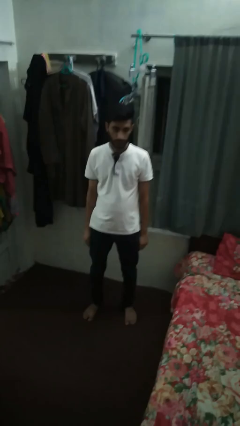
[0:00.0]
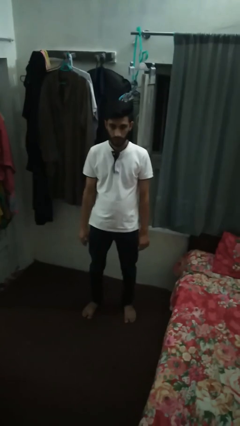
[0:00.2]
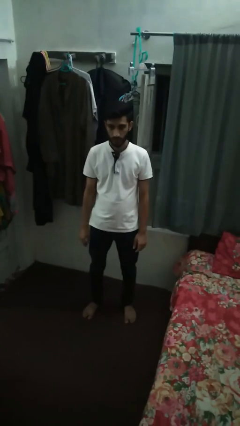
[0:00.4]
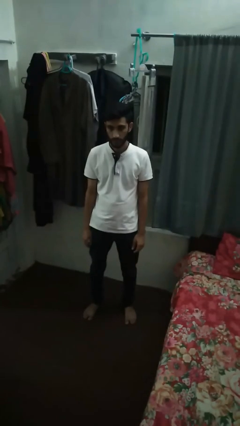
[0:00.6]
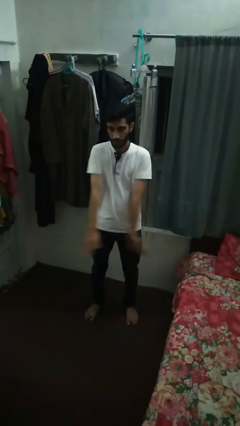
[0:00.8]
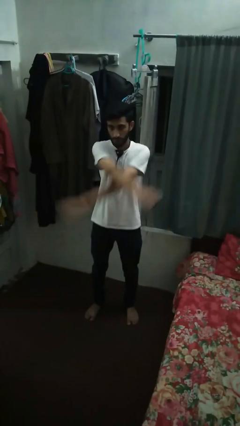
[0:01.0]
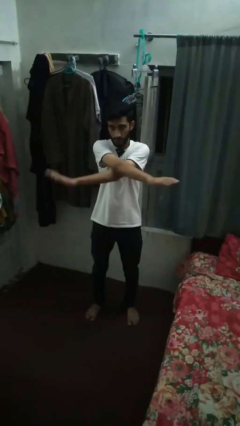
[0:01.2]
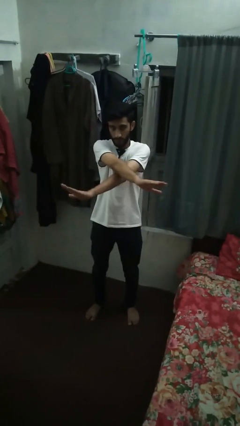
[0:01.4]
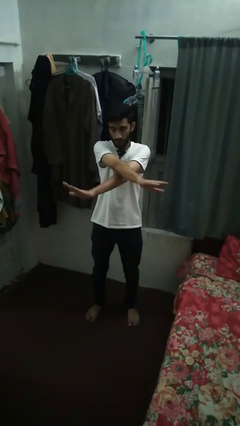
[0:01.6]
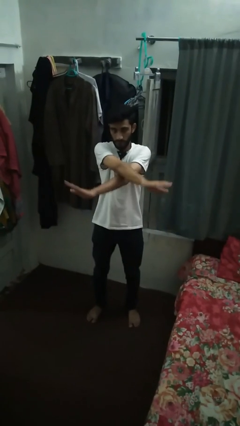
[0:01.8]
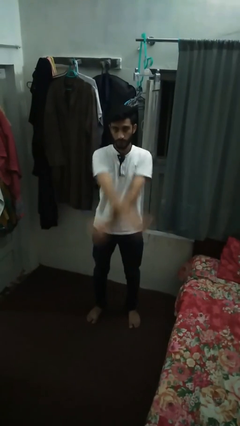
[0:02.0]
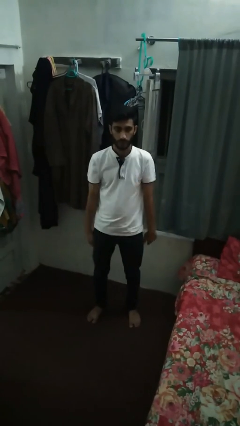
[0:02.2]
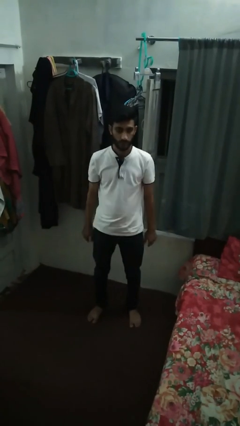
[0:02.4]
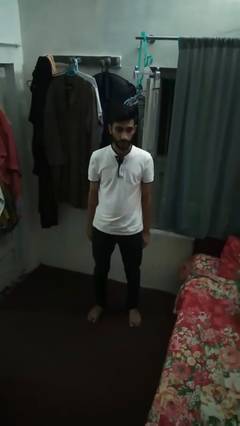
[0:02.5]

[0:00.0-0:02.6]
person gestures arms x

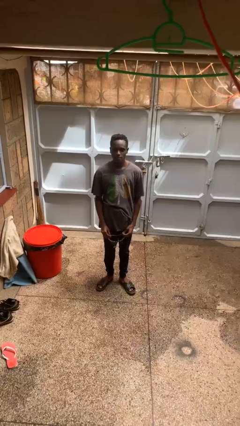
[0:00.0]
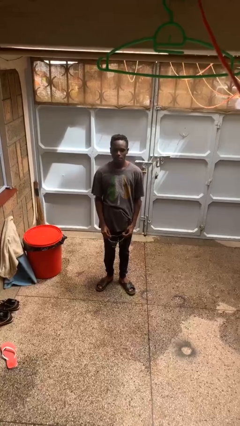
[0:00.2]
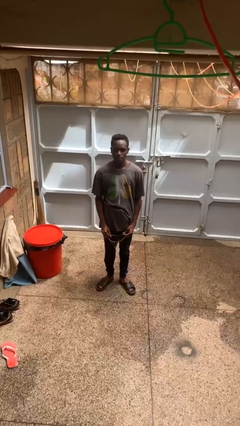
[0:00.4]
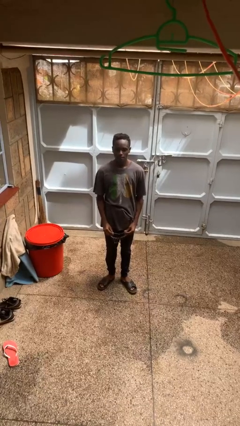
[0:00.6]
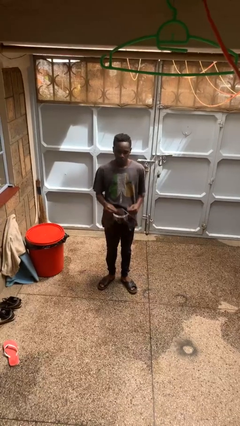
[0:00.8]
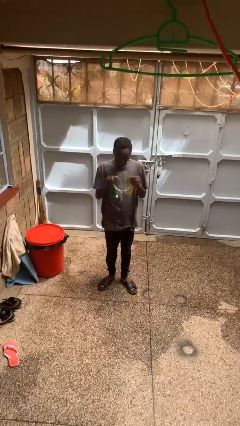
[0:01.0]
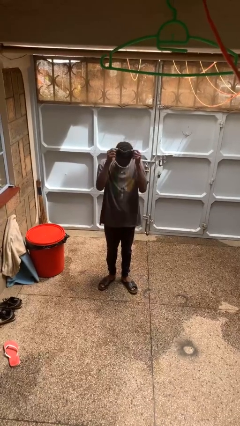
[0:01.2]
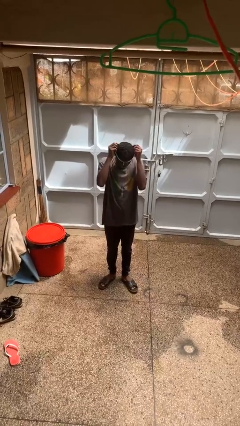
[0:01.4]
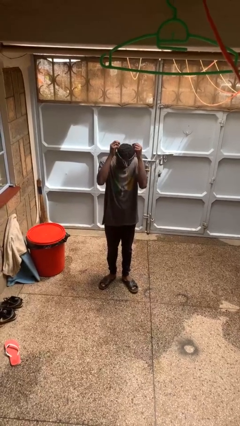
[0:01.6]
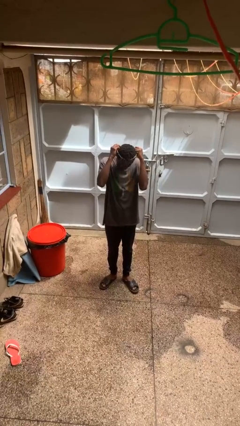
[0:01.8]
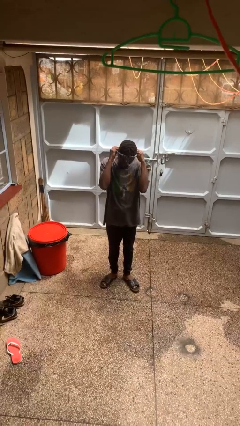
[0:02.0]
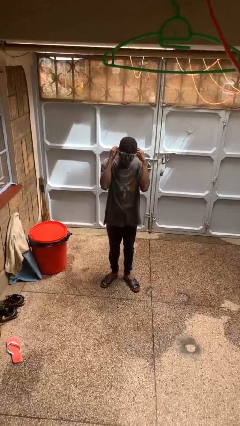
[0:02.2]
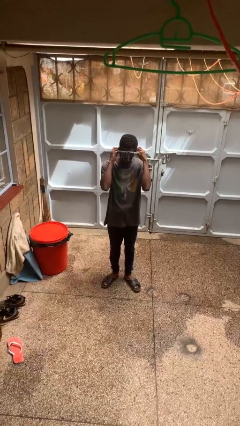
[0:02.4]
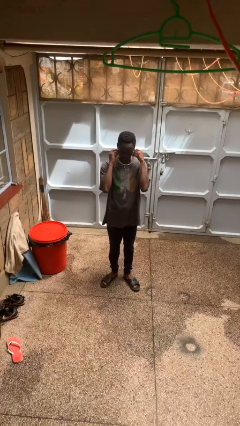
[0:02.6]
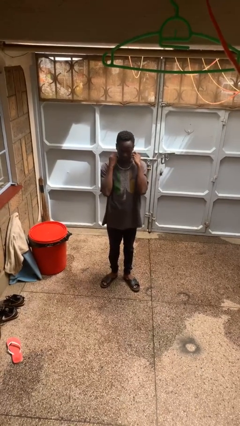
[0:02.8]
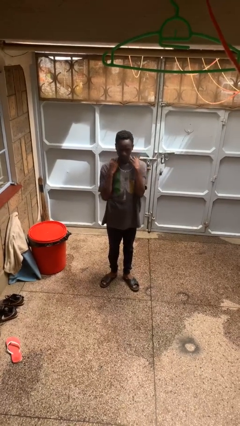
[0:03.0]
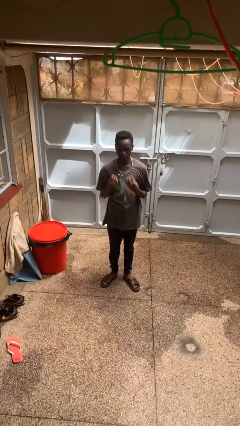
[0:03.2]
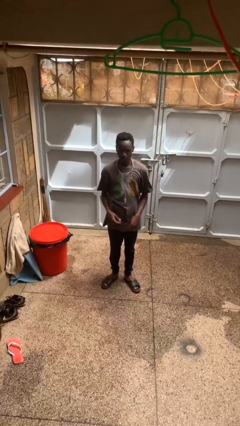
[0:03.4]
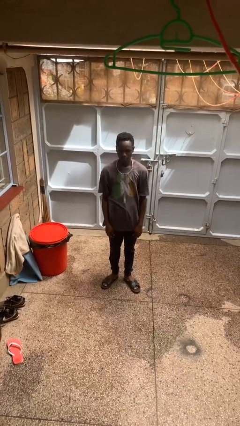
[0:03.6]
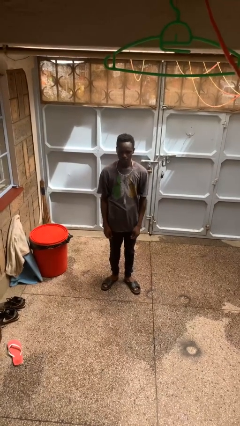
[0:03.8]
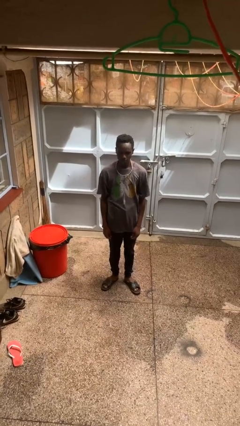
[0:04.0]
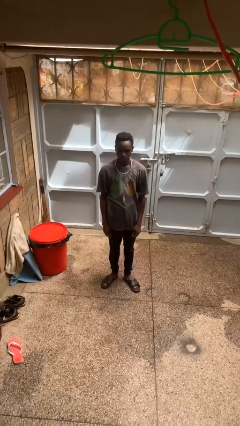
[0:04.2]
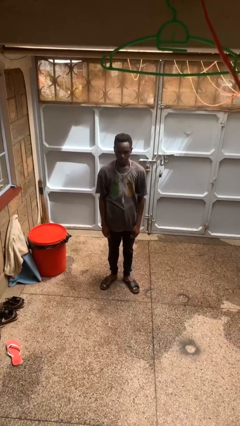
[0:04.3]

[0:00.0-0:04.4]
person puts on necklace

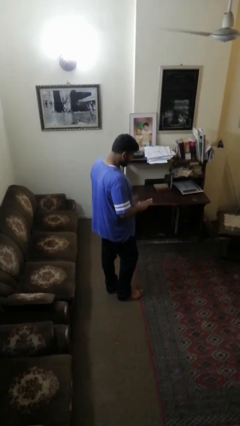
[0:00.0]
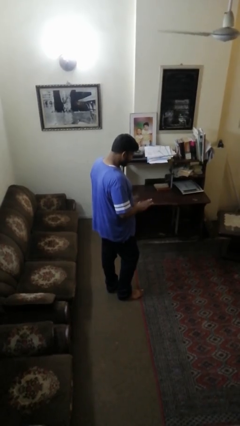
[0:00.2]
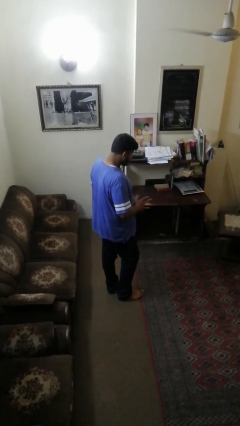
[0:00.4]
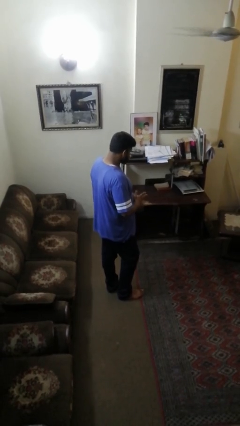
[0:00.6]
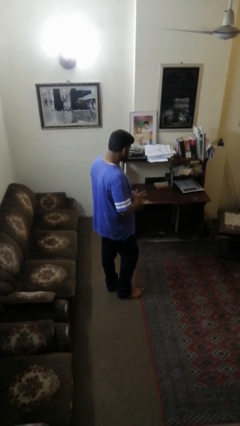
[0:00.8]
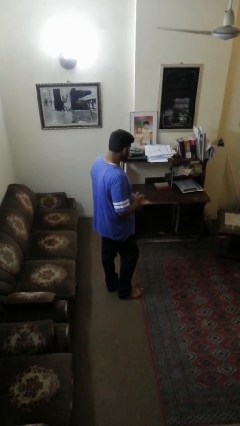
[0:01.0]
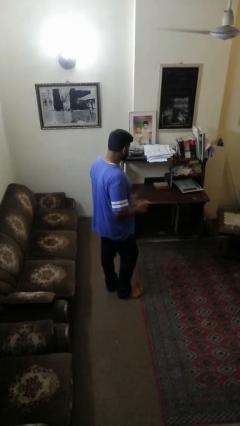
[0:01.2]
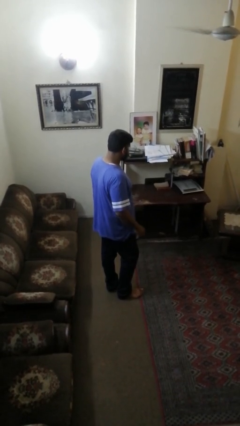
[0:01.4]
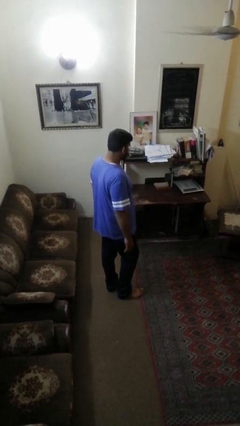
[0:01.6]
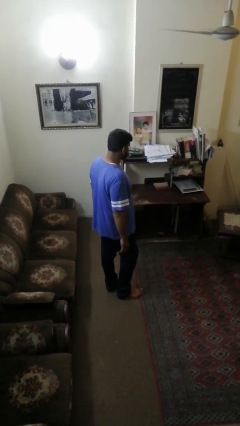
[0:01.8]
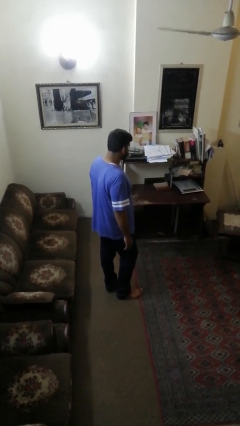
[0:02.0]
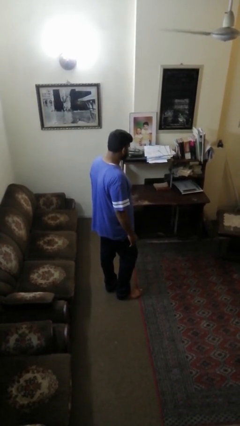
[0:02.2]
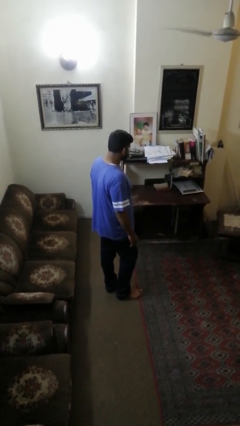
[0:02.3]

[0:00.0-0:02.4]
person takes off ring

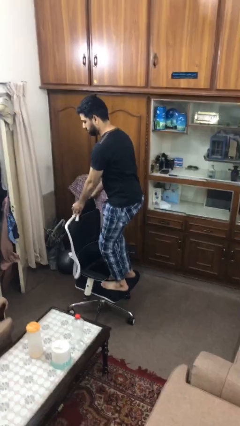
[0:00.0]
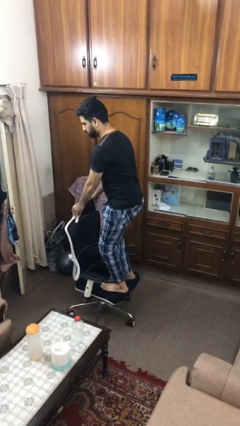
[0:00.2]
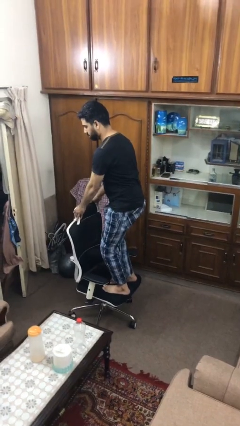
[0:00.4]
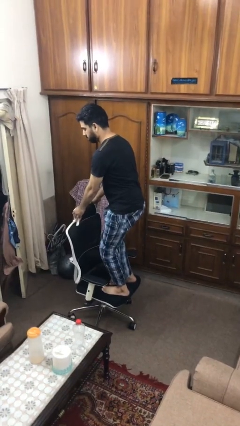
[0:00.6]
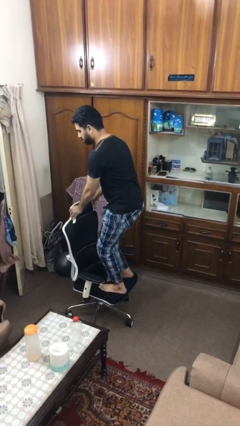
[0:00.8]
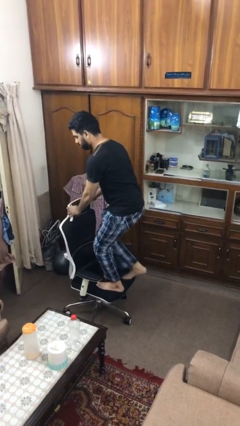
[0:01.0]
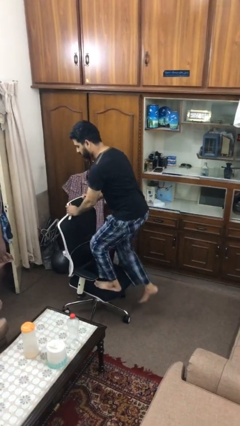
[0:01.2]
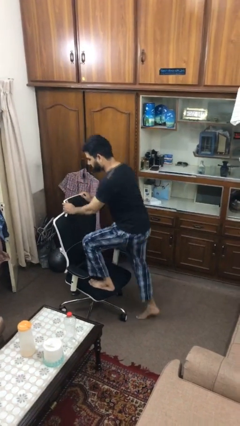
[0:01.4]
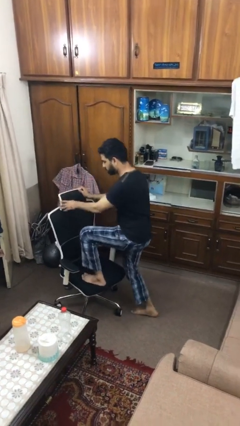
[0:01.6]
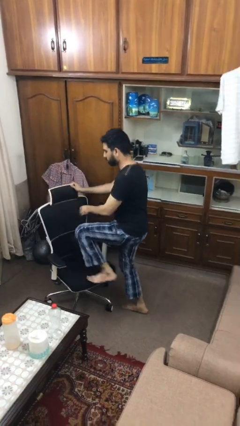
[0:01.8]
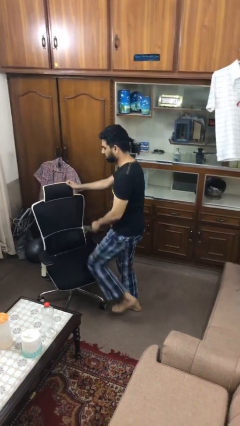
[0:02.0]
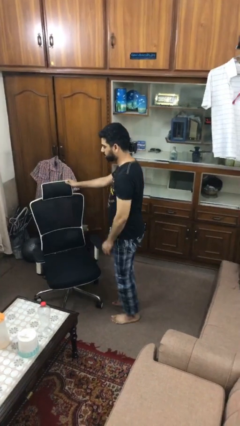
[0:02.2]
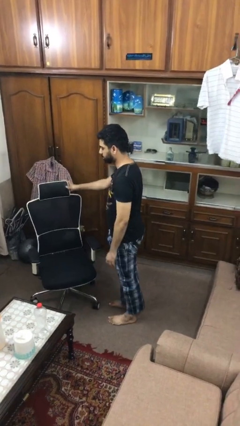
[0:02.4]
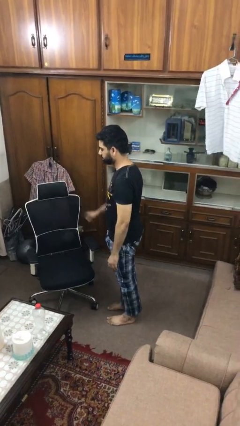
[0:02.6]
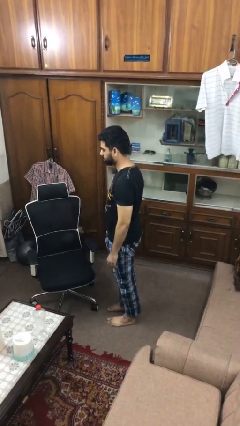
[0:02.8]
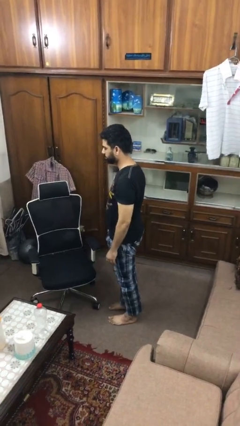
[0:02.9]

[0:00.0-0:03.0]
person climbs off chair

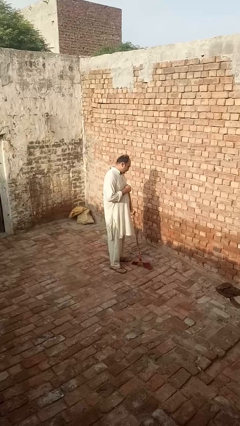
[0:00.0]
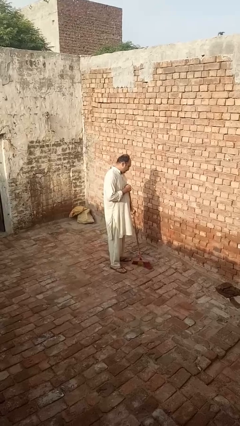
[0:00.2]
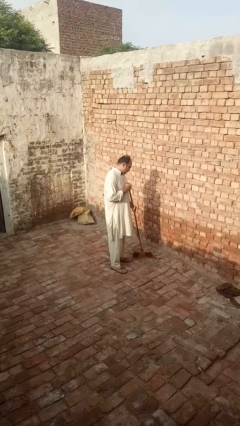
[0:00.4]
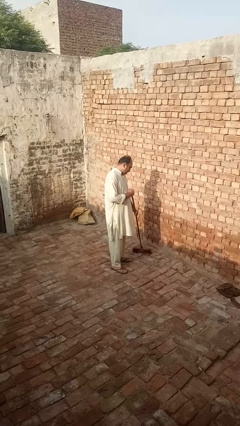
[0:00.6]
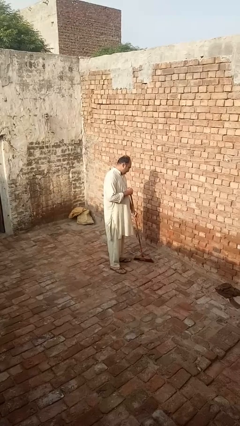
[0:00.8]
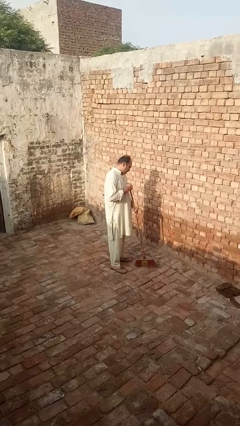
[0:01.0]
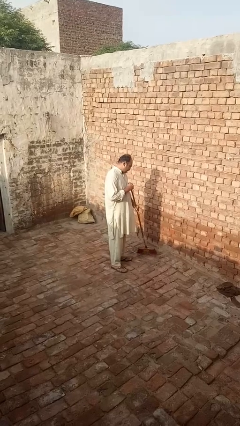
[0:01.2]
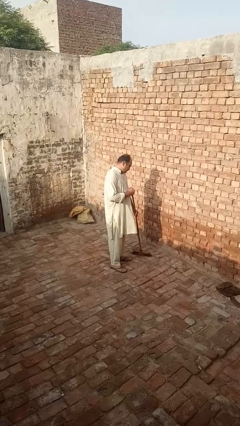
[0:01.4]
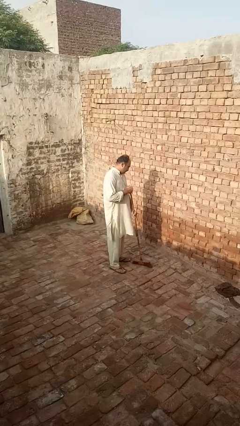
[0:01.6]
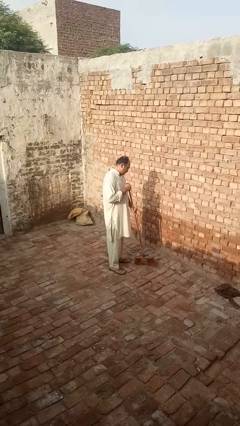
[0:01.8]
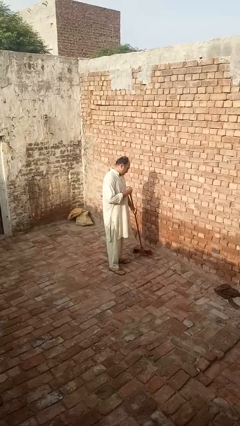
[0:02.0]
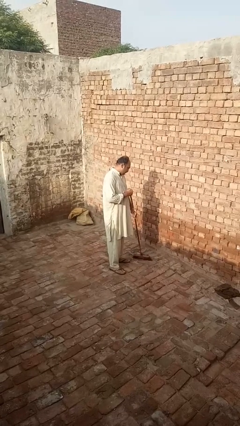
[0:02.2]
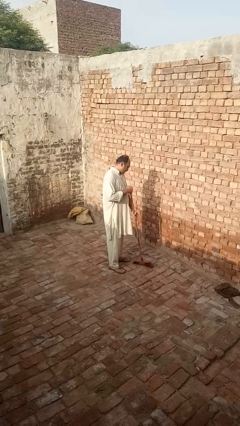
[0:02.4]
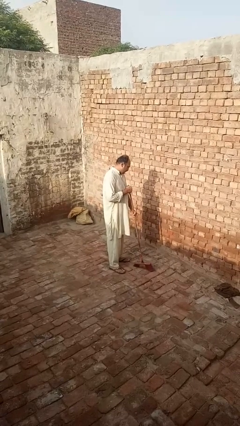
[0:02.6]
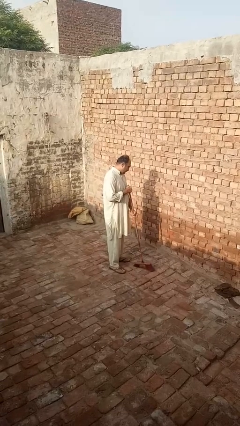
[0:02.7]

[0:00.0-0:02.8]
person sweeps floor

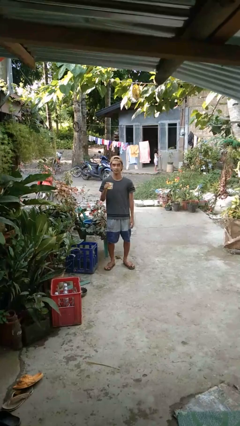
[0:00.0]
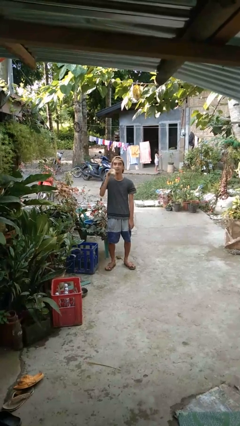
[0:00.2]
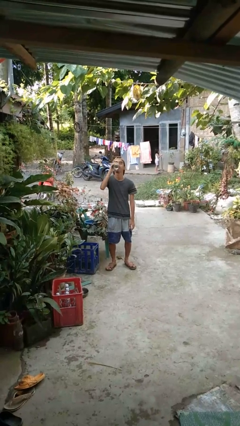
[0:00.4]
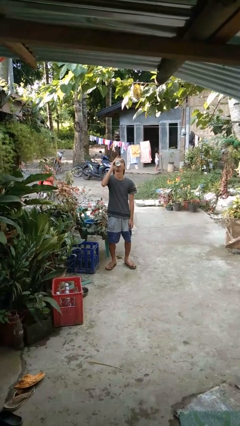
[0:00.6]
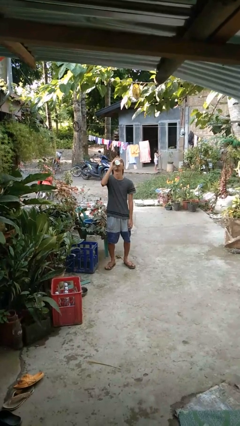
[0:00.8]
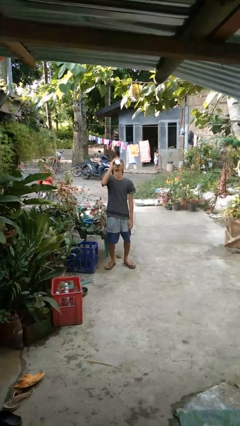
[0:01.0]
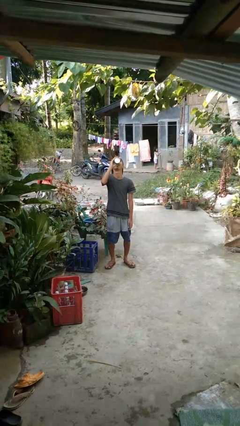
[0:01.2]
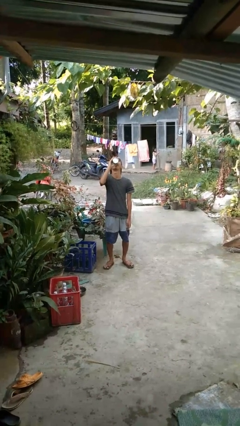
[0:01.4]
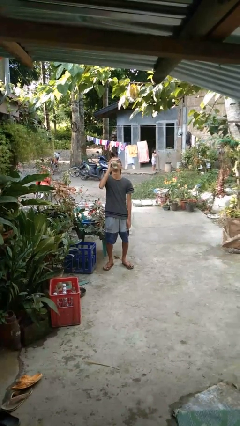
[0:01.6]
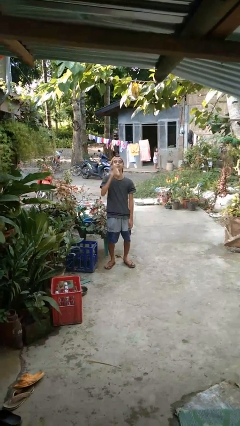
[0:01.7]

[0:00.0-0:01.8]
person drinks from beverage can

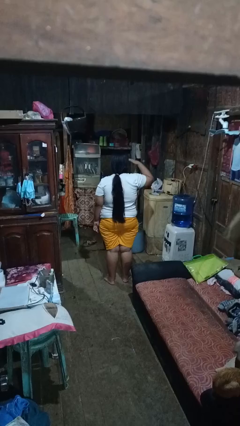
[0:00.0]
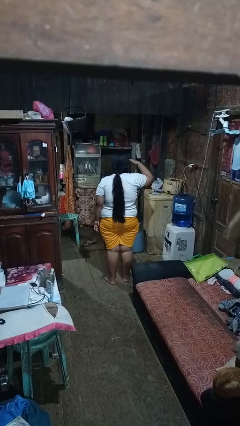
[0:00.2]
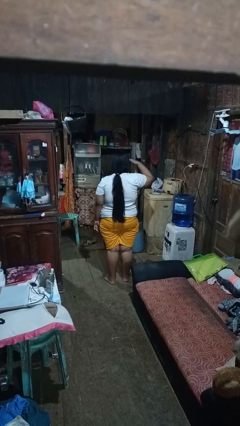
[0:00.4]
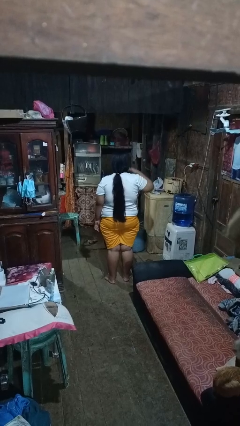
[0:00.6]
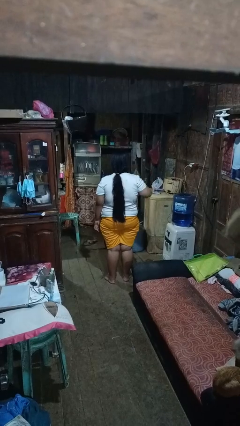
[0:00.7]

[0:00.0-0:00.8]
person salutes
